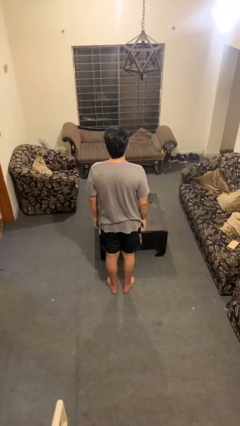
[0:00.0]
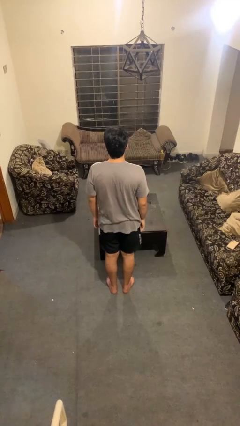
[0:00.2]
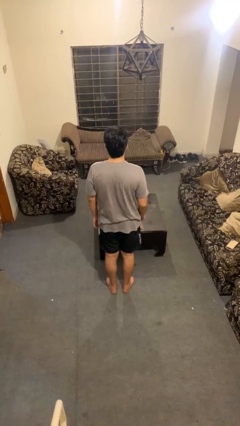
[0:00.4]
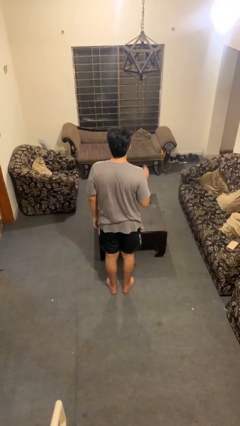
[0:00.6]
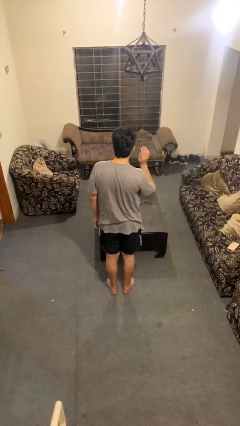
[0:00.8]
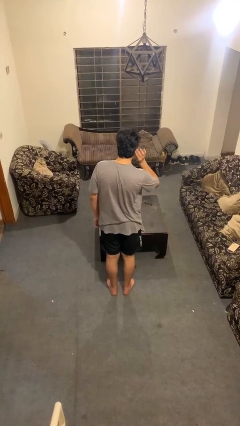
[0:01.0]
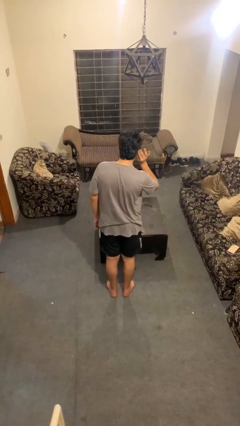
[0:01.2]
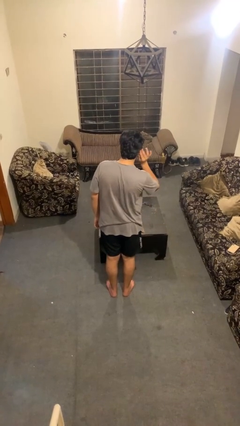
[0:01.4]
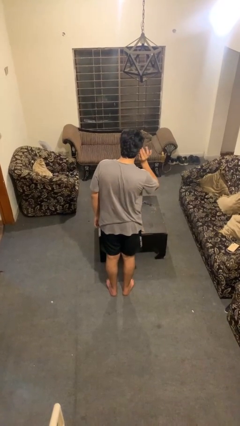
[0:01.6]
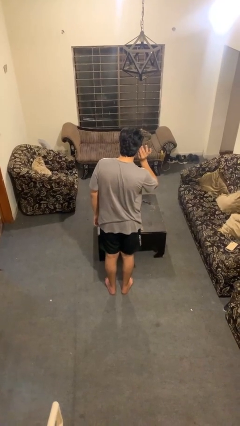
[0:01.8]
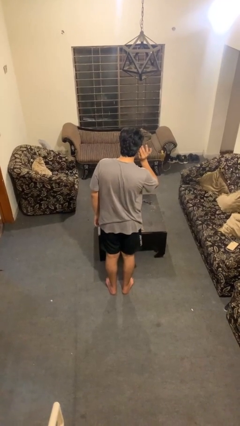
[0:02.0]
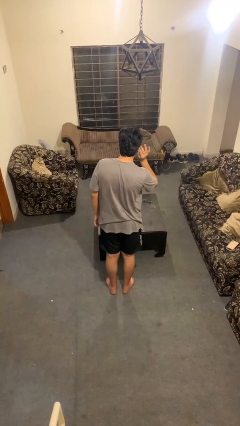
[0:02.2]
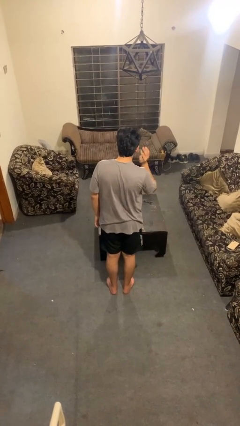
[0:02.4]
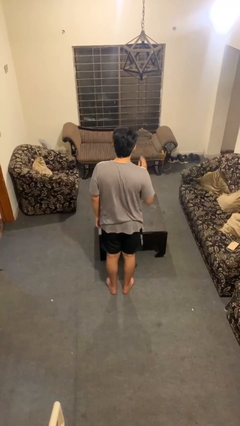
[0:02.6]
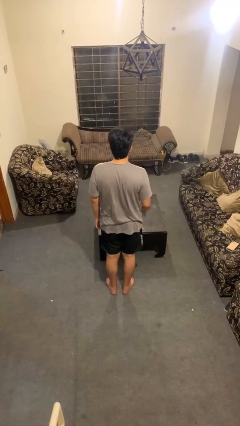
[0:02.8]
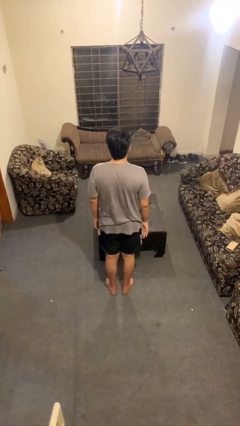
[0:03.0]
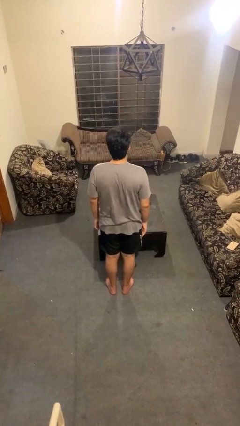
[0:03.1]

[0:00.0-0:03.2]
person gestures listen closely

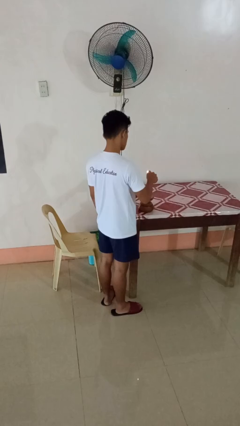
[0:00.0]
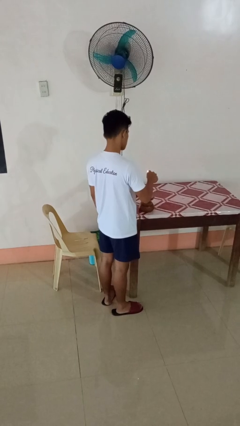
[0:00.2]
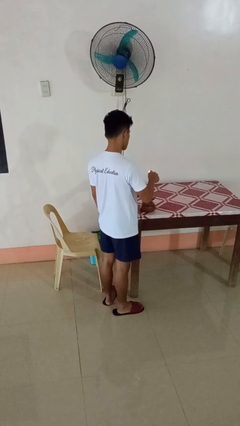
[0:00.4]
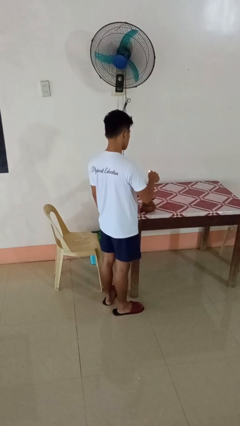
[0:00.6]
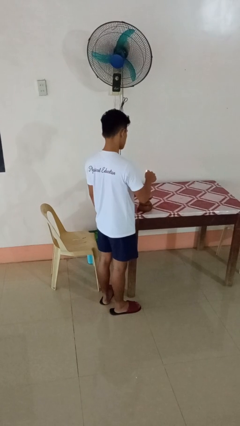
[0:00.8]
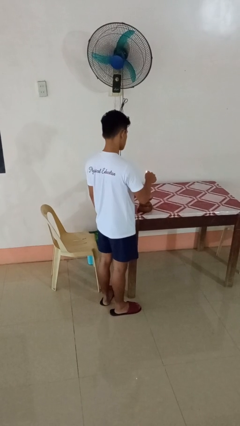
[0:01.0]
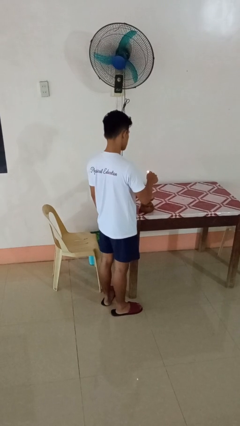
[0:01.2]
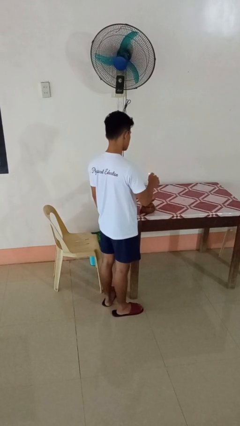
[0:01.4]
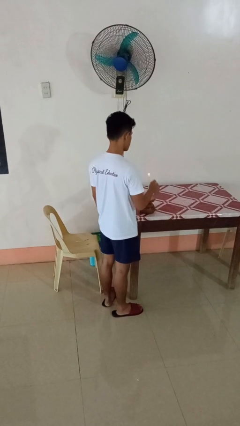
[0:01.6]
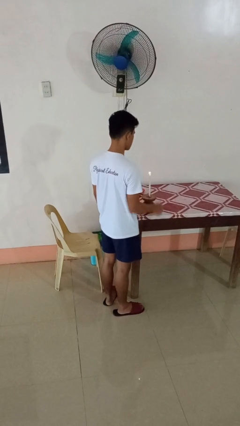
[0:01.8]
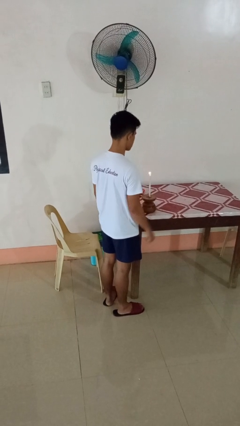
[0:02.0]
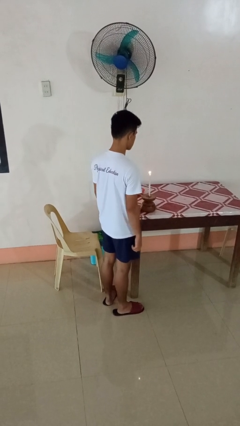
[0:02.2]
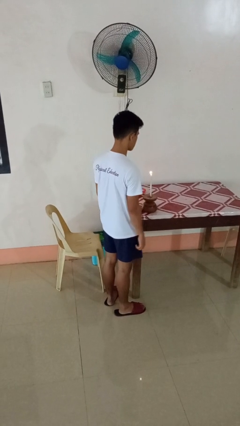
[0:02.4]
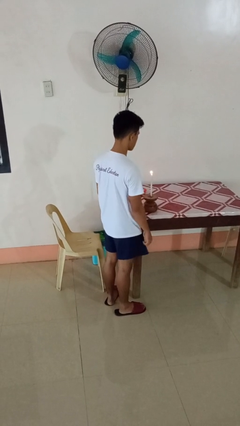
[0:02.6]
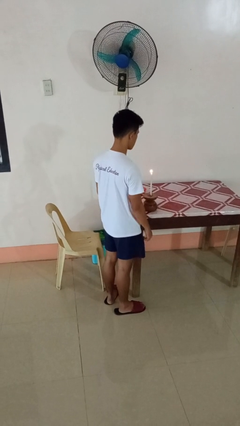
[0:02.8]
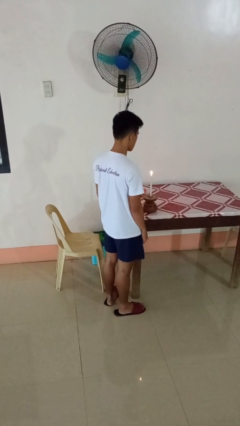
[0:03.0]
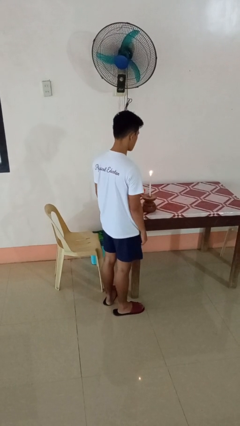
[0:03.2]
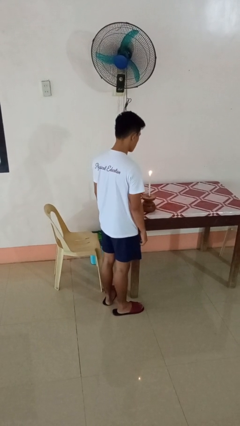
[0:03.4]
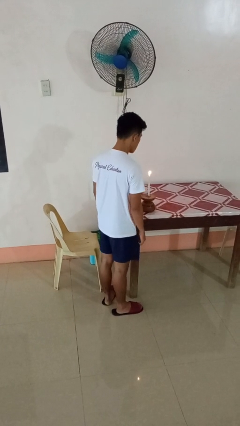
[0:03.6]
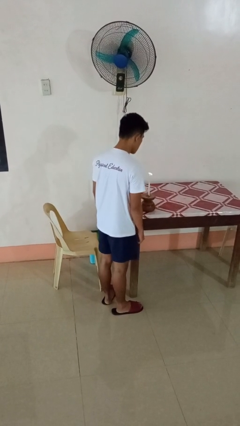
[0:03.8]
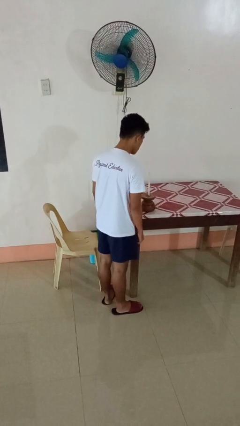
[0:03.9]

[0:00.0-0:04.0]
person lights candle

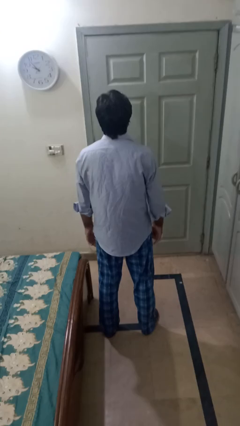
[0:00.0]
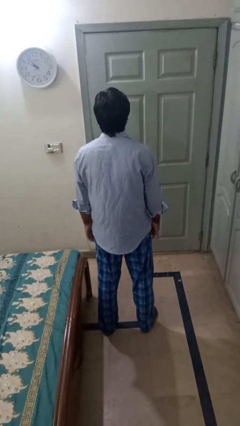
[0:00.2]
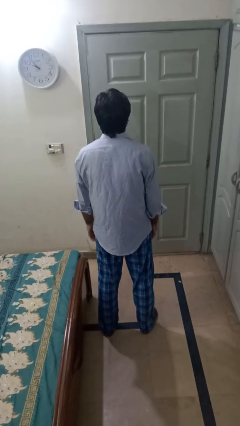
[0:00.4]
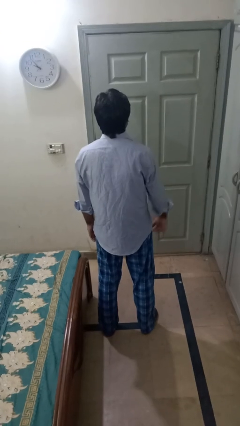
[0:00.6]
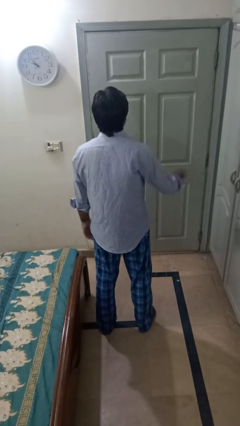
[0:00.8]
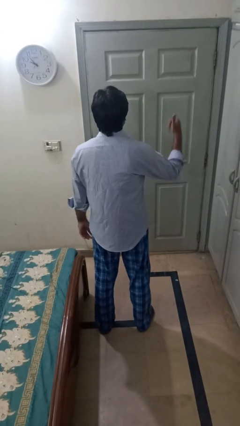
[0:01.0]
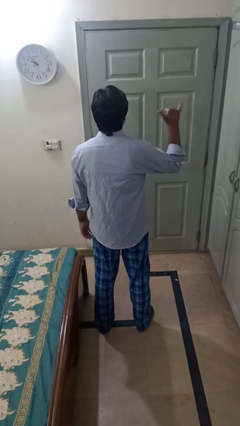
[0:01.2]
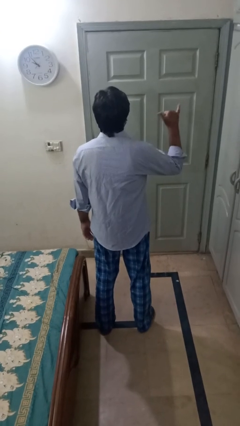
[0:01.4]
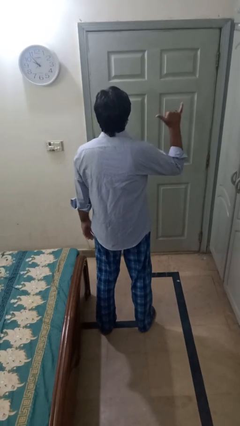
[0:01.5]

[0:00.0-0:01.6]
person gestures hang loose

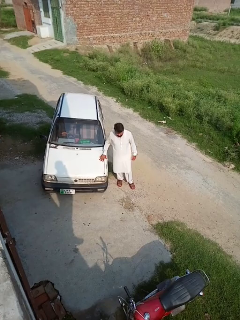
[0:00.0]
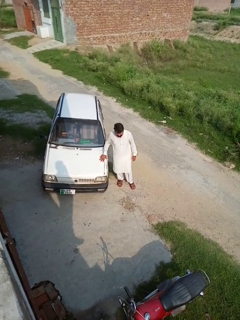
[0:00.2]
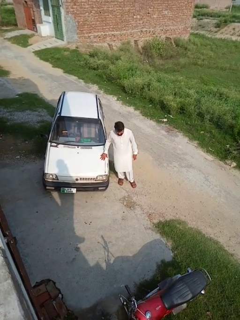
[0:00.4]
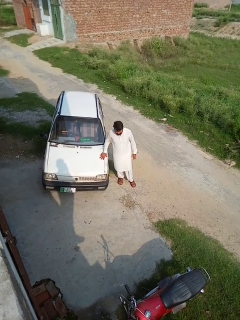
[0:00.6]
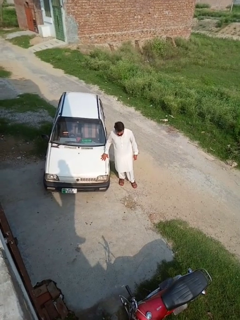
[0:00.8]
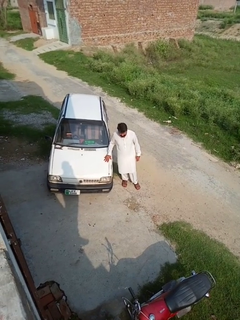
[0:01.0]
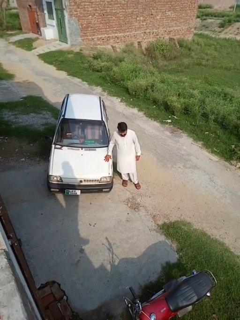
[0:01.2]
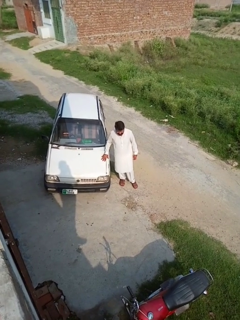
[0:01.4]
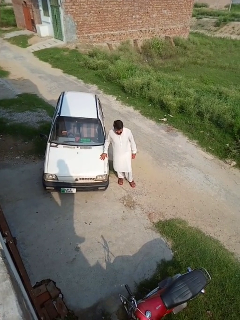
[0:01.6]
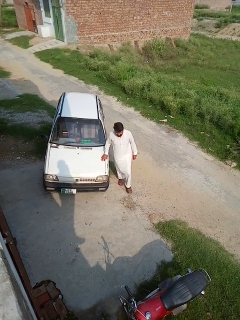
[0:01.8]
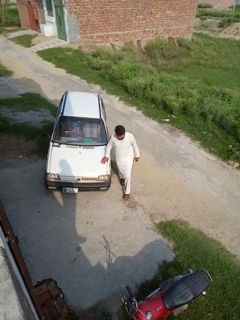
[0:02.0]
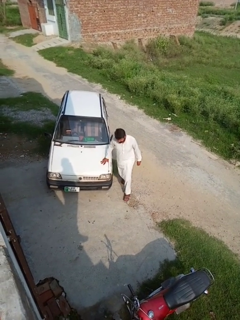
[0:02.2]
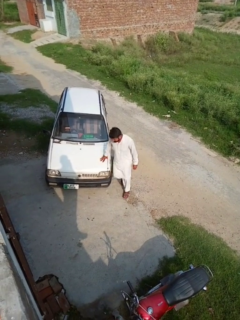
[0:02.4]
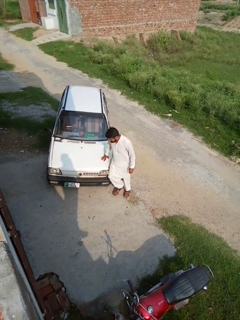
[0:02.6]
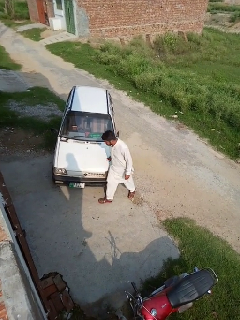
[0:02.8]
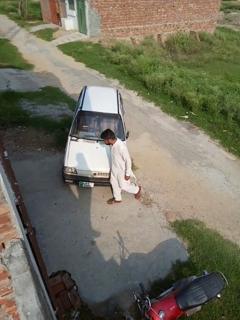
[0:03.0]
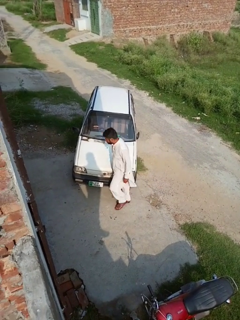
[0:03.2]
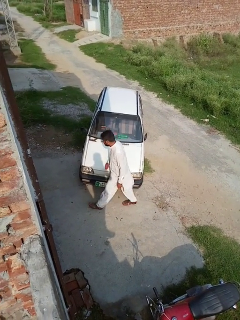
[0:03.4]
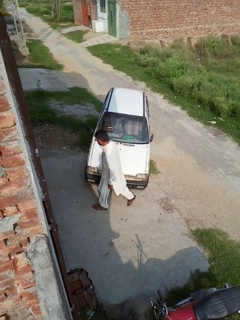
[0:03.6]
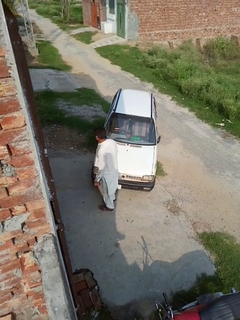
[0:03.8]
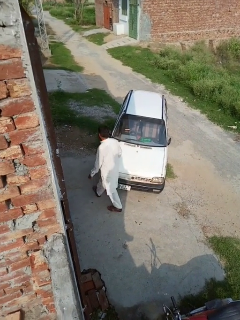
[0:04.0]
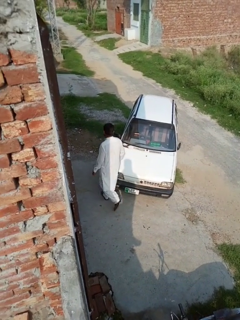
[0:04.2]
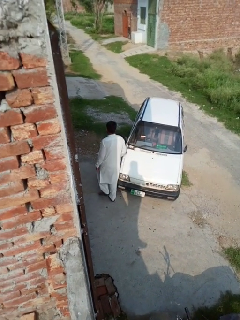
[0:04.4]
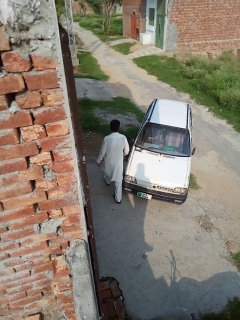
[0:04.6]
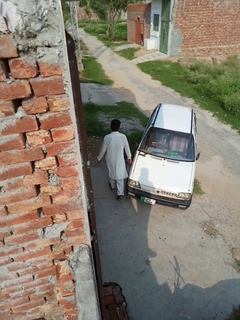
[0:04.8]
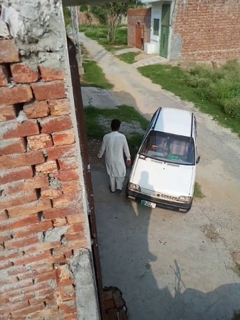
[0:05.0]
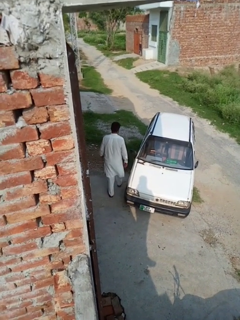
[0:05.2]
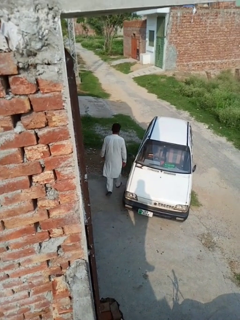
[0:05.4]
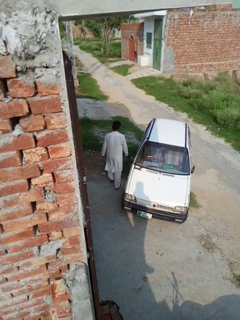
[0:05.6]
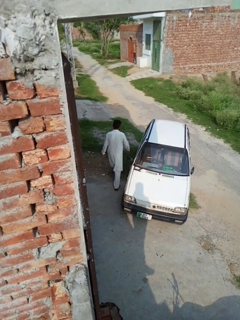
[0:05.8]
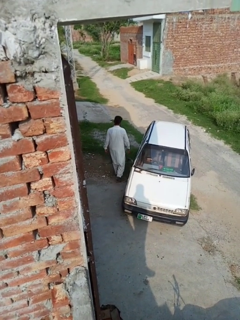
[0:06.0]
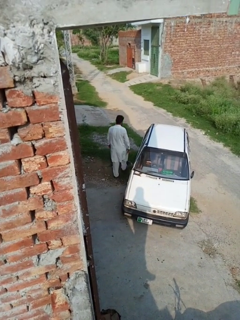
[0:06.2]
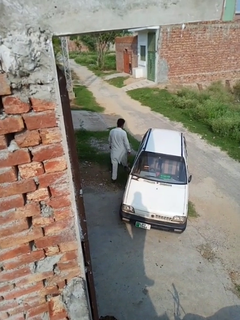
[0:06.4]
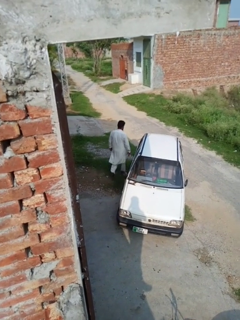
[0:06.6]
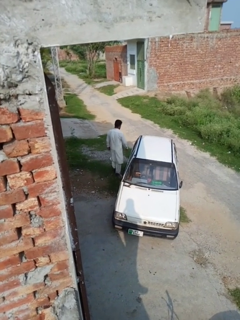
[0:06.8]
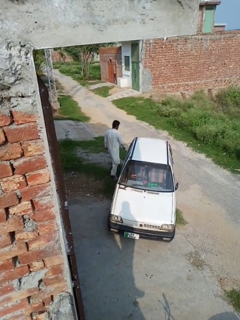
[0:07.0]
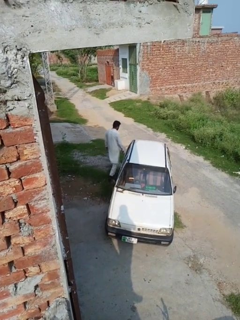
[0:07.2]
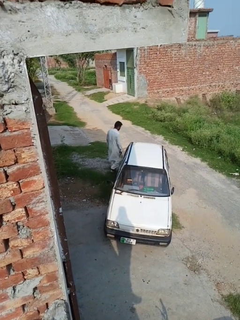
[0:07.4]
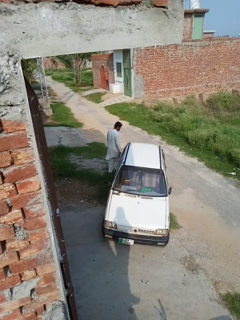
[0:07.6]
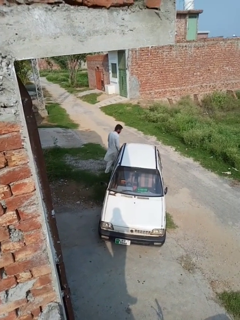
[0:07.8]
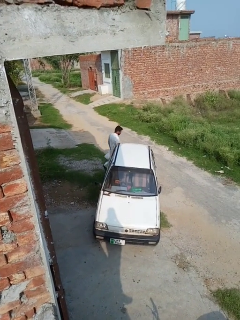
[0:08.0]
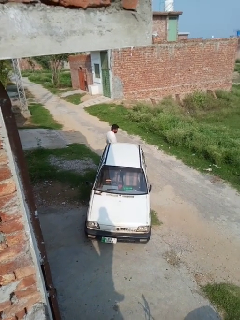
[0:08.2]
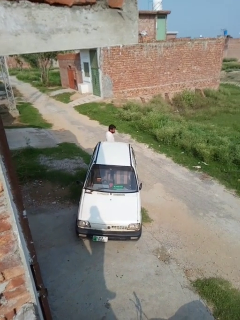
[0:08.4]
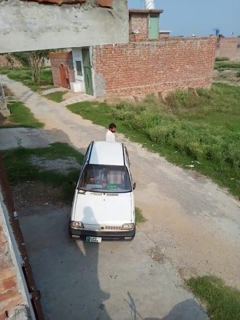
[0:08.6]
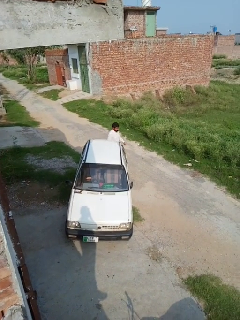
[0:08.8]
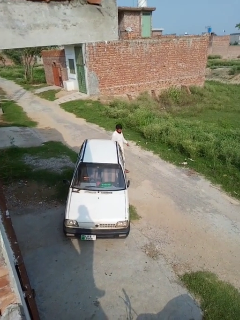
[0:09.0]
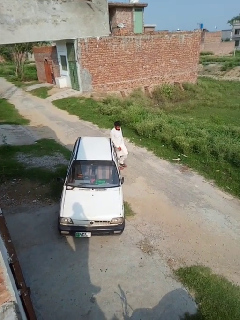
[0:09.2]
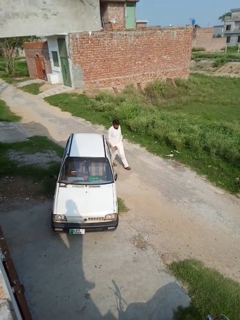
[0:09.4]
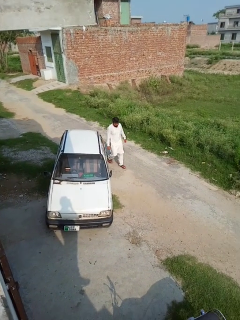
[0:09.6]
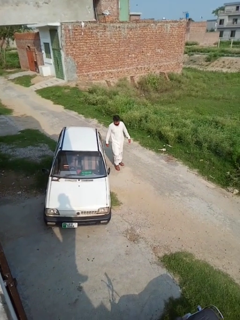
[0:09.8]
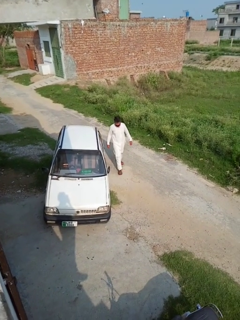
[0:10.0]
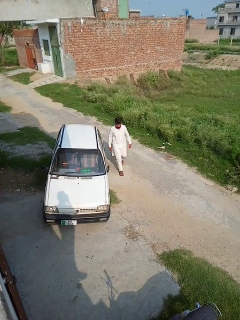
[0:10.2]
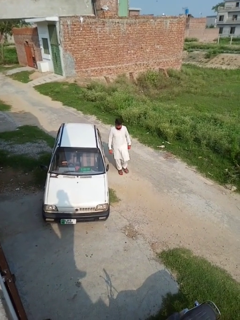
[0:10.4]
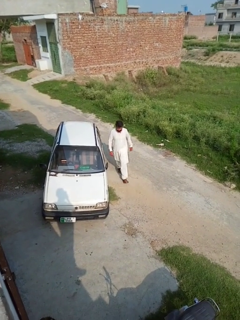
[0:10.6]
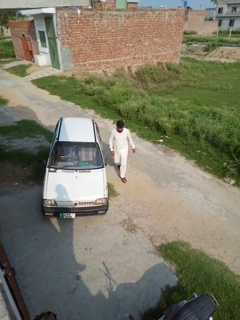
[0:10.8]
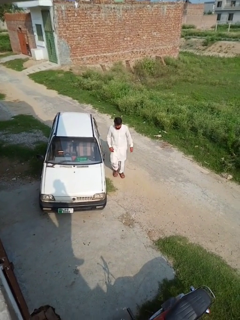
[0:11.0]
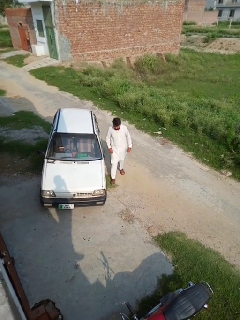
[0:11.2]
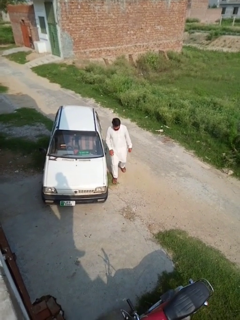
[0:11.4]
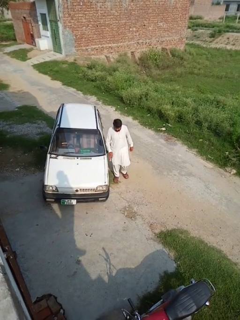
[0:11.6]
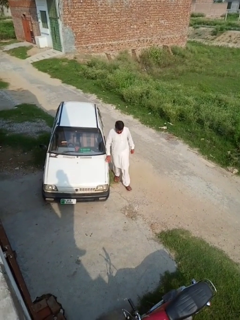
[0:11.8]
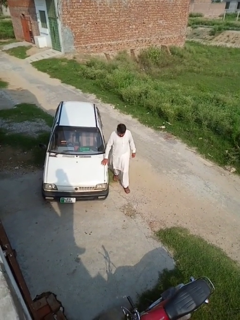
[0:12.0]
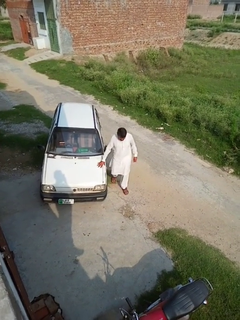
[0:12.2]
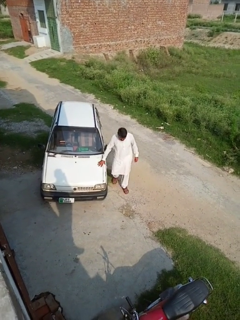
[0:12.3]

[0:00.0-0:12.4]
person walks around car
